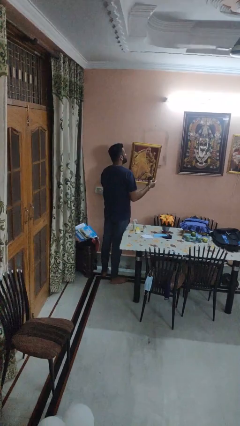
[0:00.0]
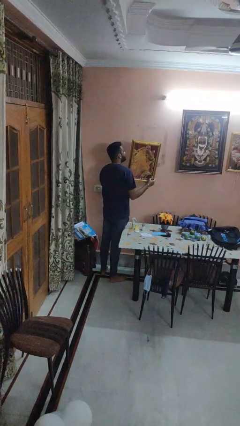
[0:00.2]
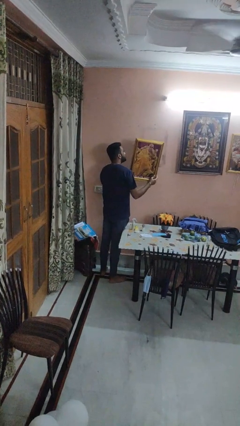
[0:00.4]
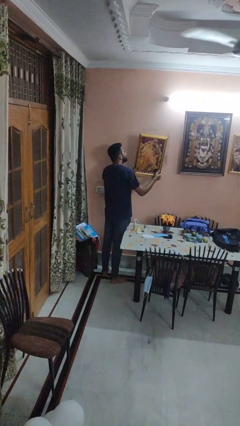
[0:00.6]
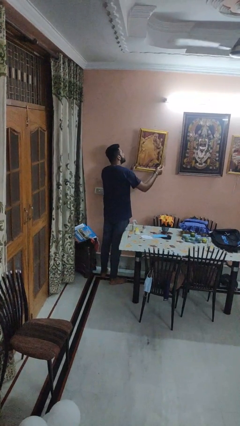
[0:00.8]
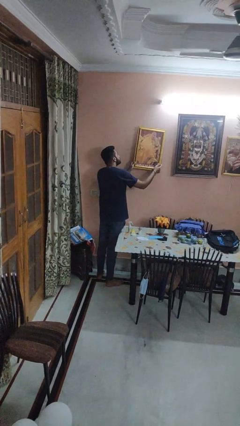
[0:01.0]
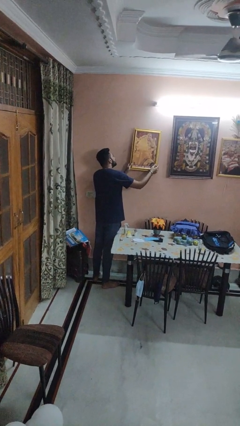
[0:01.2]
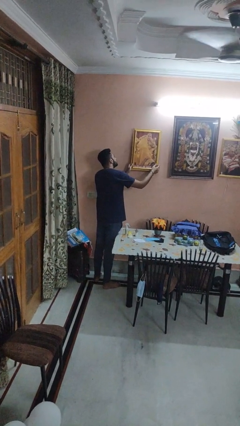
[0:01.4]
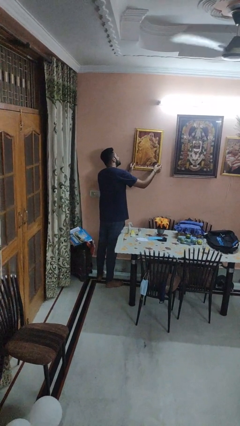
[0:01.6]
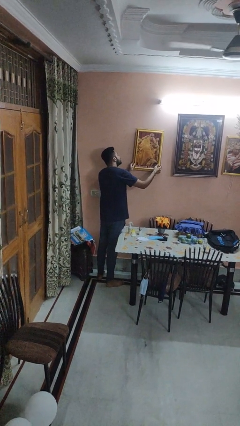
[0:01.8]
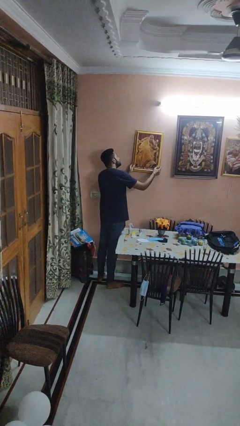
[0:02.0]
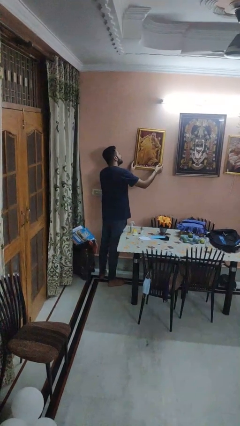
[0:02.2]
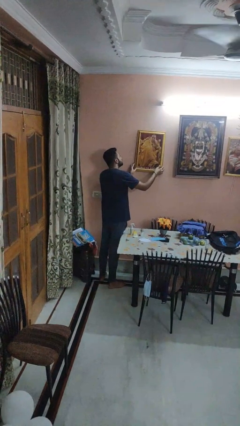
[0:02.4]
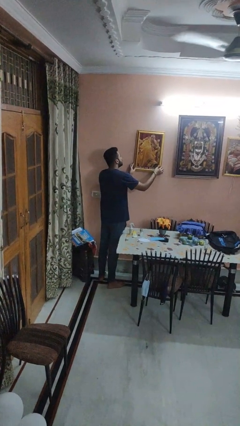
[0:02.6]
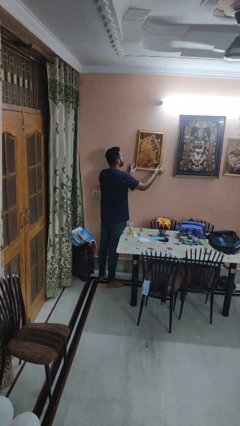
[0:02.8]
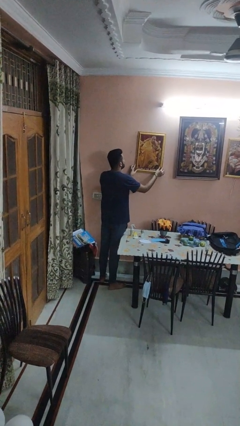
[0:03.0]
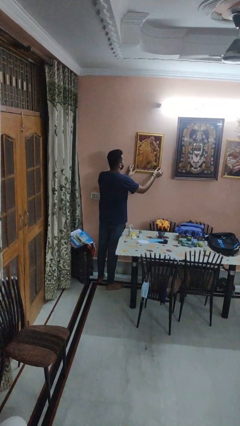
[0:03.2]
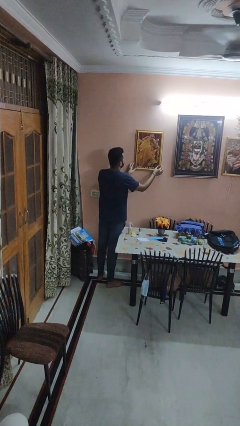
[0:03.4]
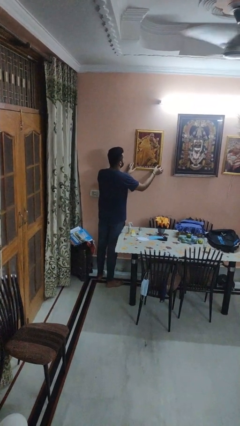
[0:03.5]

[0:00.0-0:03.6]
person puts up picture frame

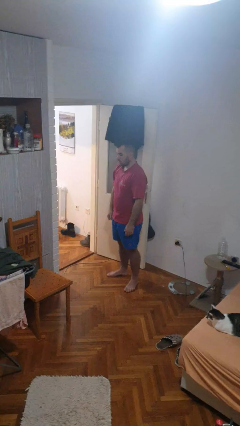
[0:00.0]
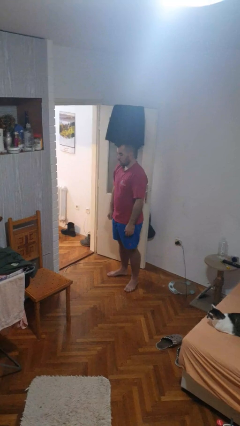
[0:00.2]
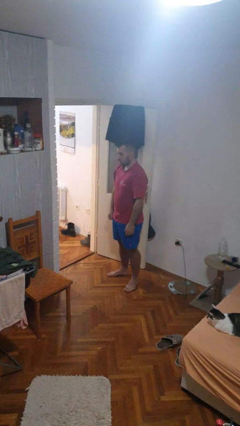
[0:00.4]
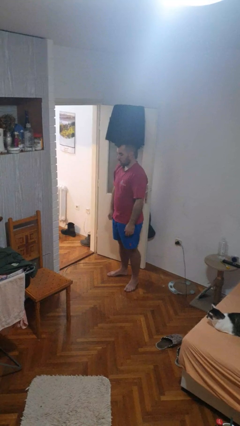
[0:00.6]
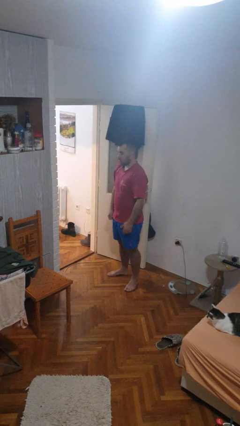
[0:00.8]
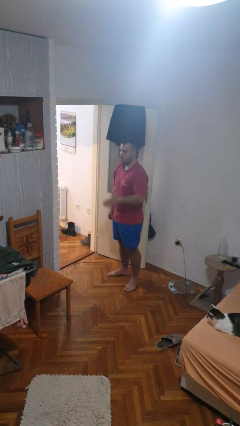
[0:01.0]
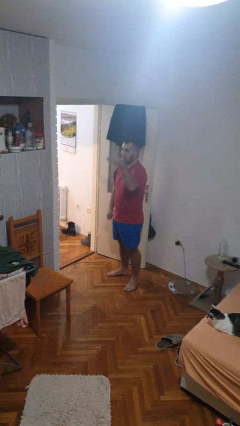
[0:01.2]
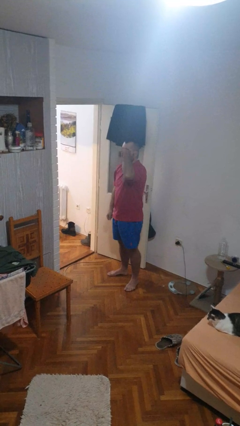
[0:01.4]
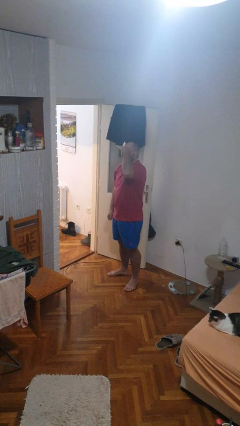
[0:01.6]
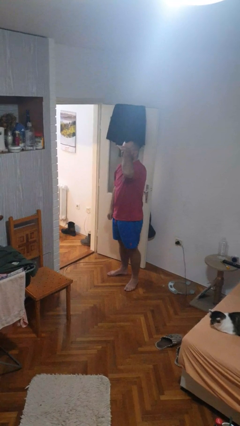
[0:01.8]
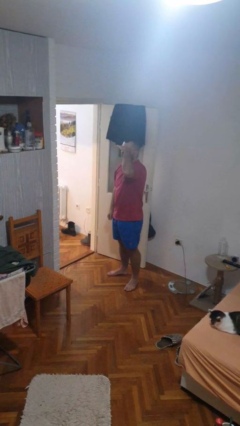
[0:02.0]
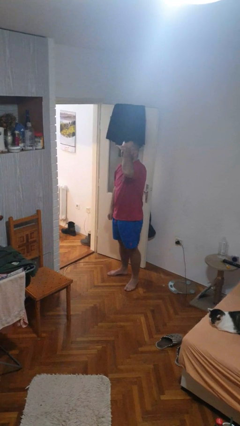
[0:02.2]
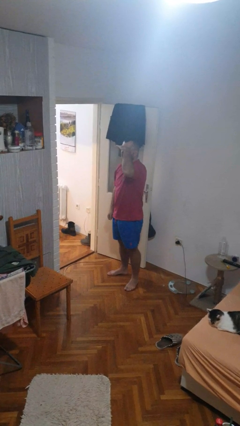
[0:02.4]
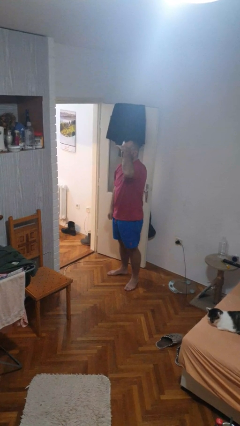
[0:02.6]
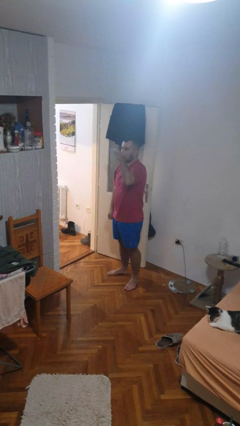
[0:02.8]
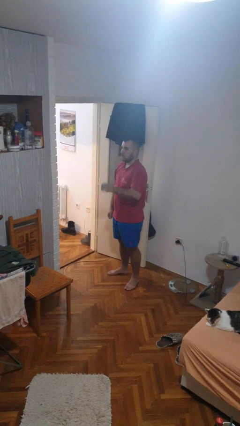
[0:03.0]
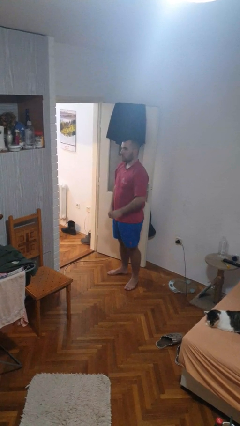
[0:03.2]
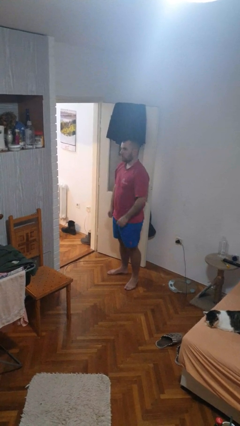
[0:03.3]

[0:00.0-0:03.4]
person shades eyes

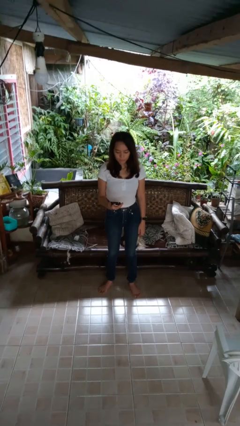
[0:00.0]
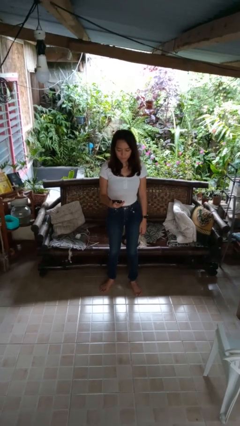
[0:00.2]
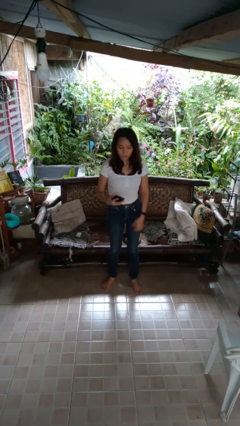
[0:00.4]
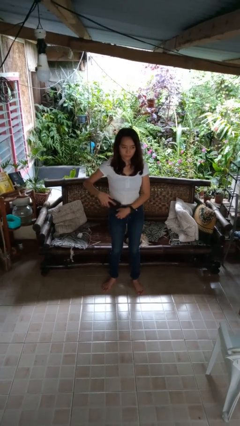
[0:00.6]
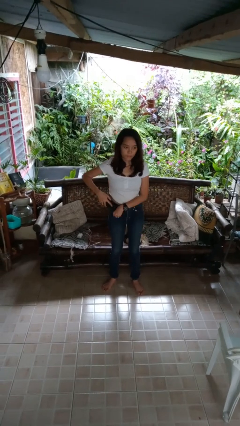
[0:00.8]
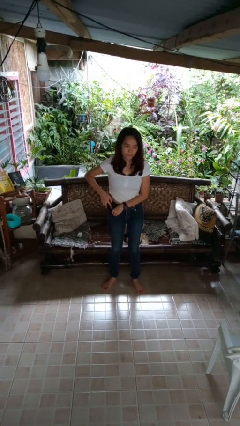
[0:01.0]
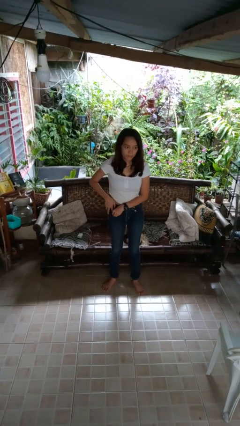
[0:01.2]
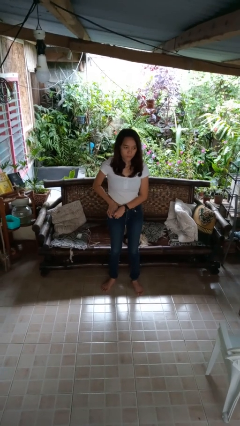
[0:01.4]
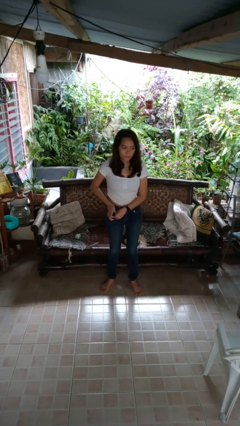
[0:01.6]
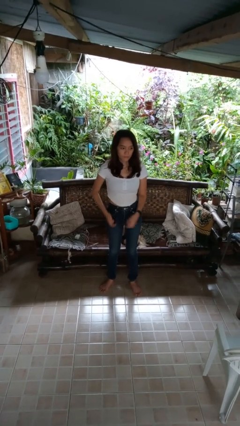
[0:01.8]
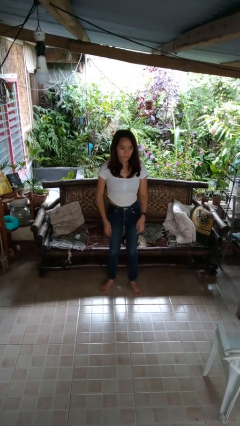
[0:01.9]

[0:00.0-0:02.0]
person puts phone into pocket

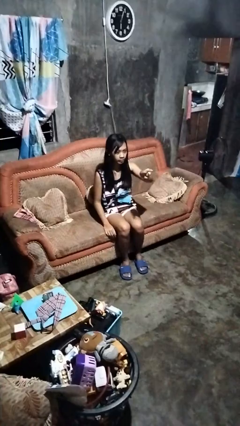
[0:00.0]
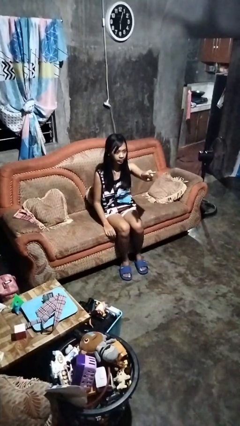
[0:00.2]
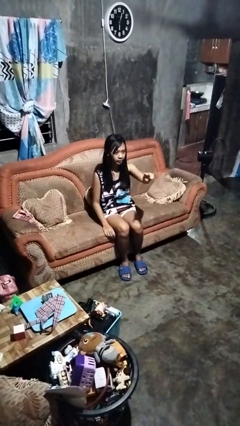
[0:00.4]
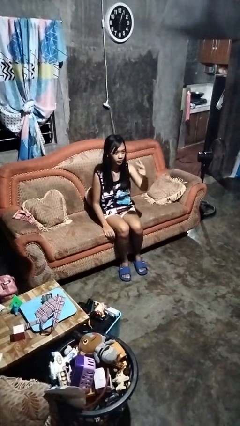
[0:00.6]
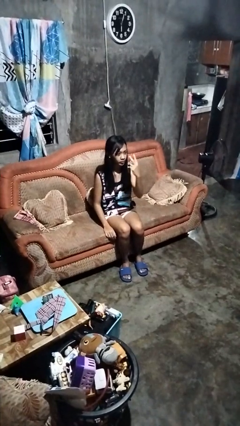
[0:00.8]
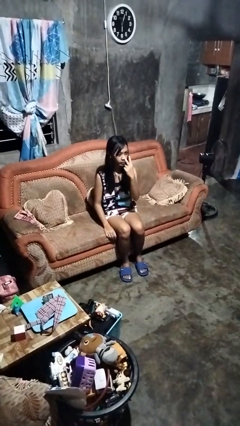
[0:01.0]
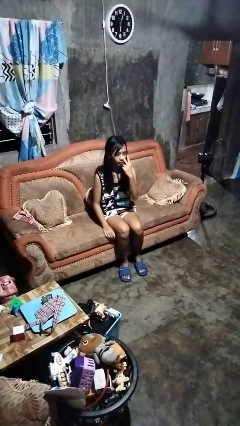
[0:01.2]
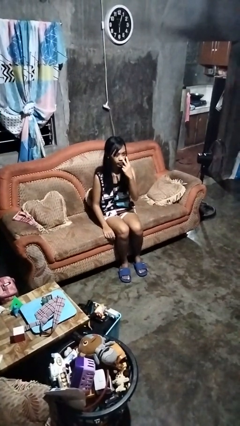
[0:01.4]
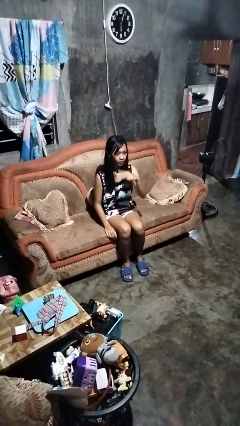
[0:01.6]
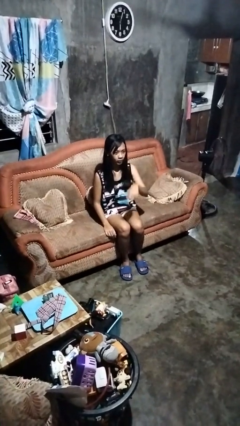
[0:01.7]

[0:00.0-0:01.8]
person gestures watch closely

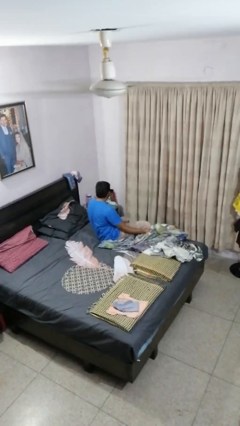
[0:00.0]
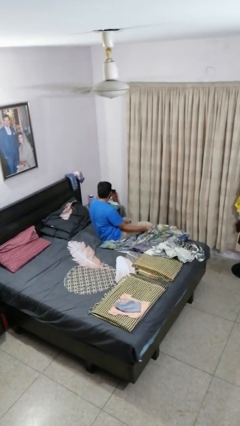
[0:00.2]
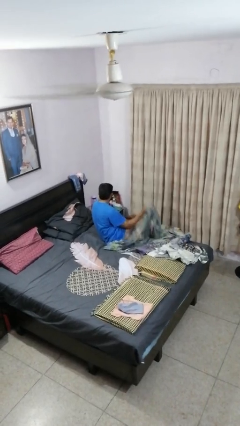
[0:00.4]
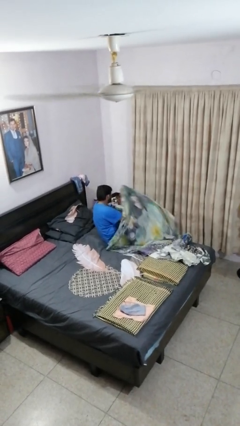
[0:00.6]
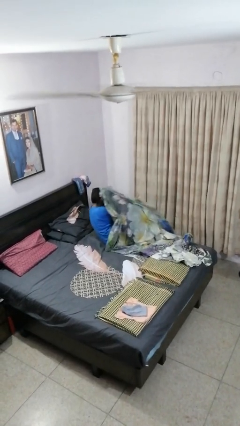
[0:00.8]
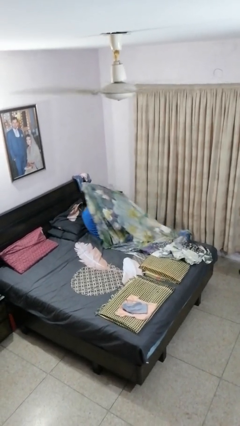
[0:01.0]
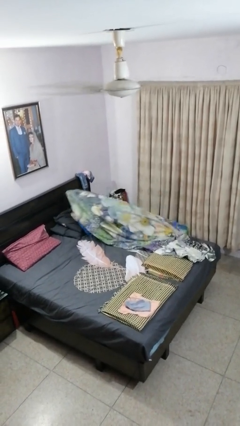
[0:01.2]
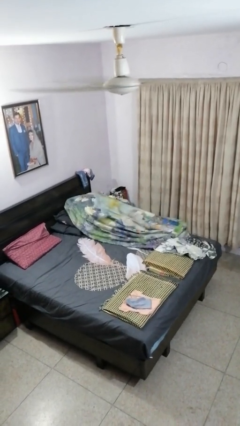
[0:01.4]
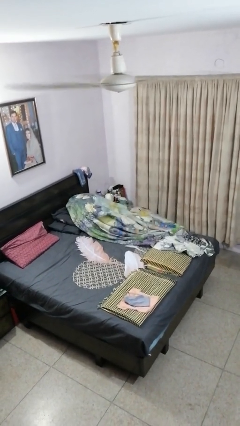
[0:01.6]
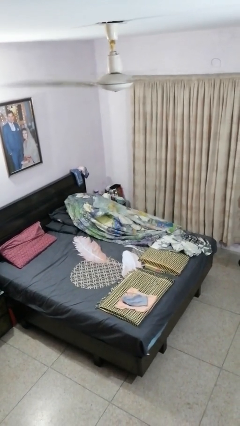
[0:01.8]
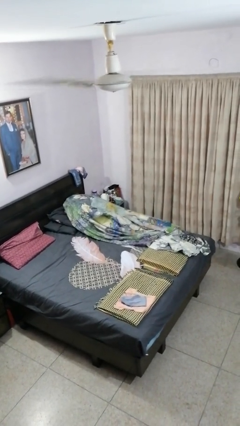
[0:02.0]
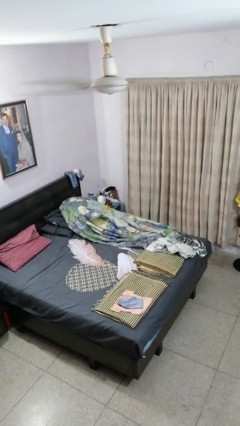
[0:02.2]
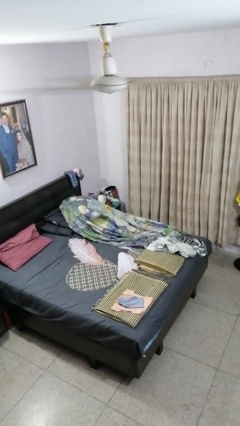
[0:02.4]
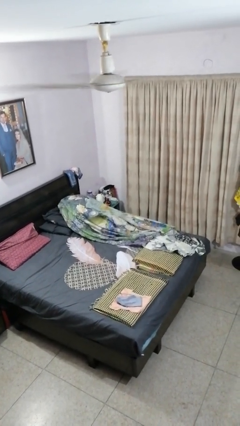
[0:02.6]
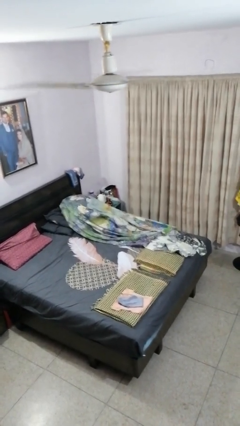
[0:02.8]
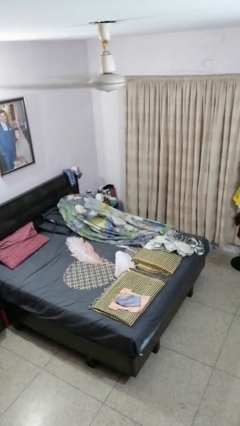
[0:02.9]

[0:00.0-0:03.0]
person covers with bedsheets

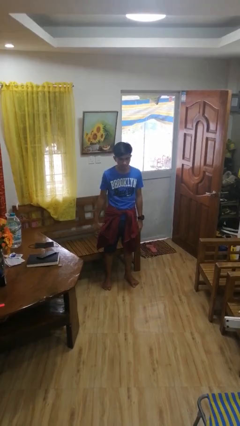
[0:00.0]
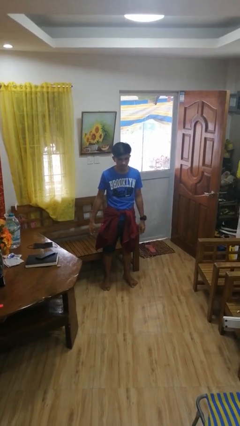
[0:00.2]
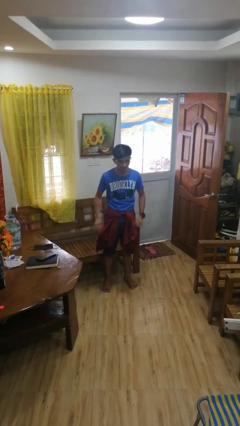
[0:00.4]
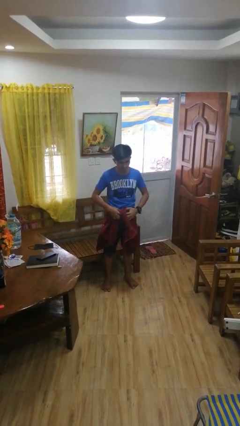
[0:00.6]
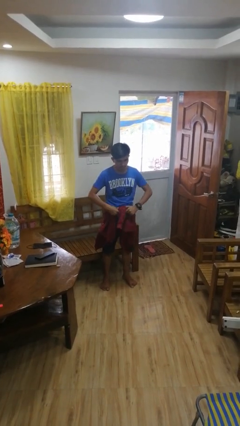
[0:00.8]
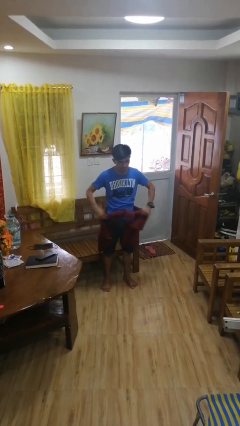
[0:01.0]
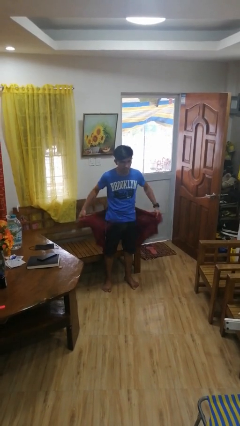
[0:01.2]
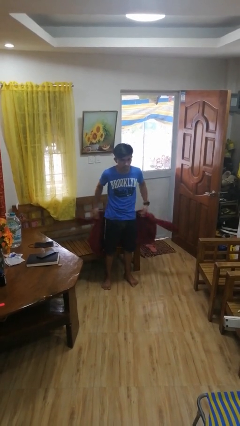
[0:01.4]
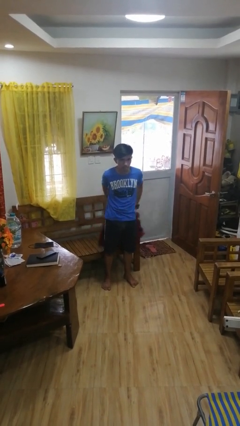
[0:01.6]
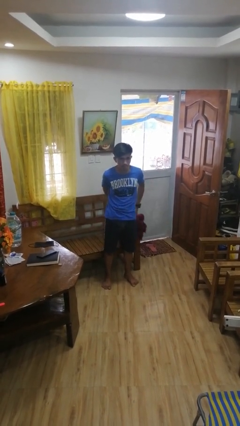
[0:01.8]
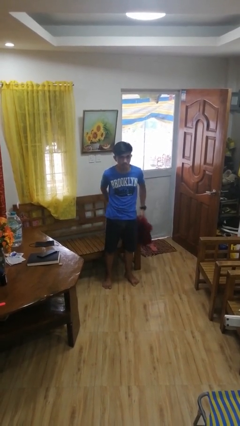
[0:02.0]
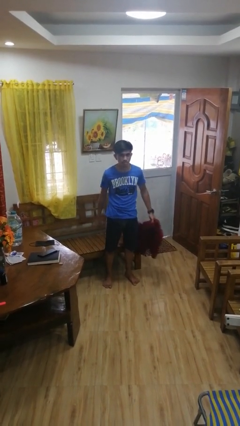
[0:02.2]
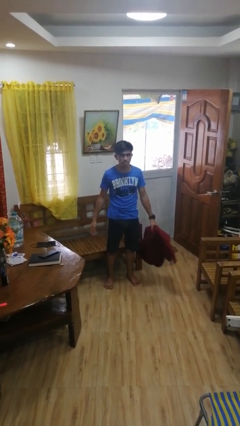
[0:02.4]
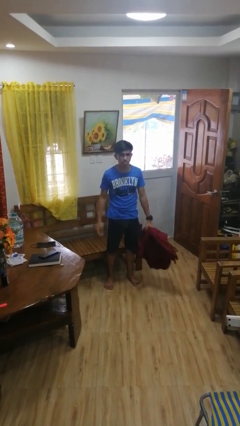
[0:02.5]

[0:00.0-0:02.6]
person unties jacket around waist

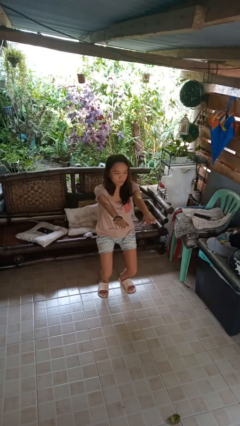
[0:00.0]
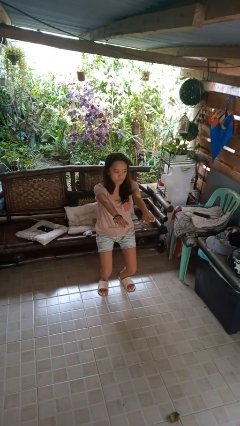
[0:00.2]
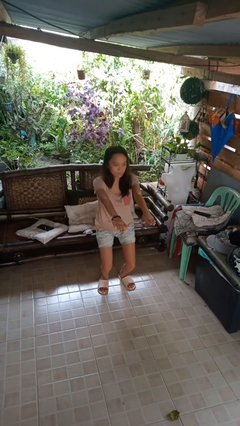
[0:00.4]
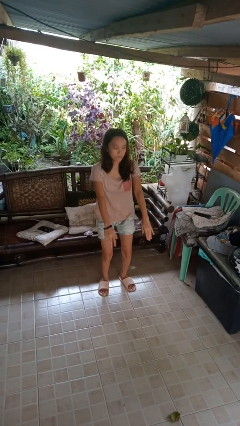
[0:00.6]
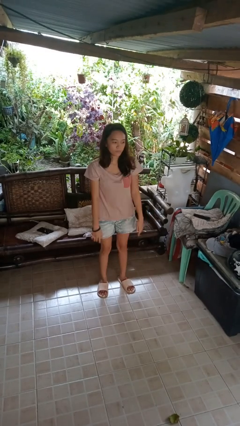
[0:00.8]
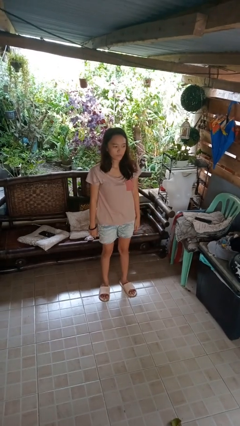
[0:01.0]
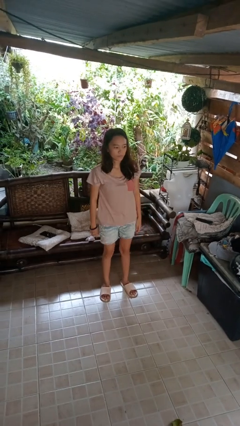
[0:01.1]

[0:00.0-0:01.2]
person stands up
